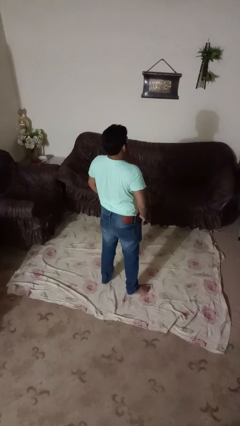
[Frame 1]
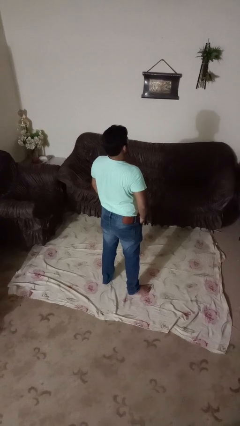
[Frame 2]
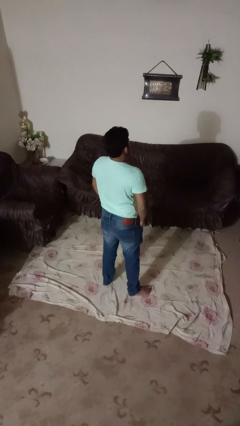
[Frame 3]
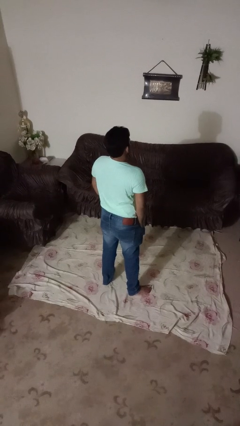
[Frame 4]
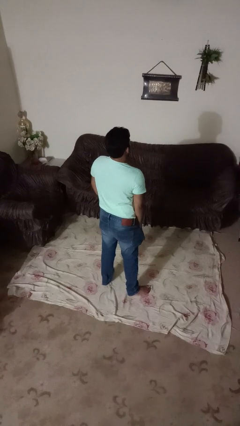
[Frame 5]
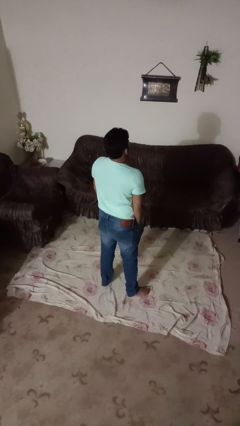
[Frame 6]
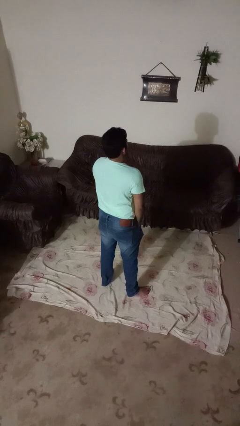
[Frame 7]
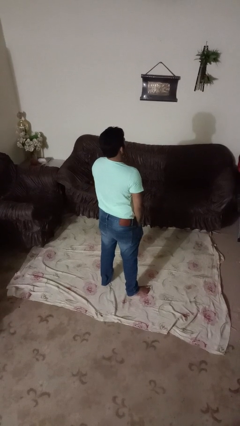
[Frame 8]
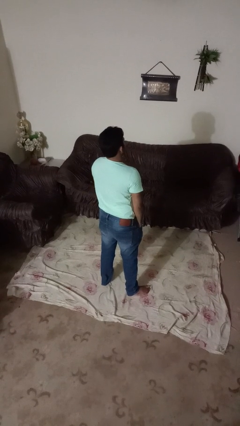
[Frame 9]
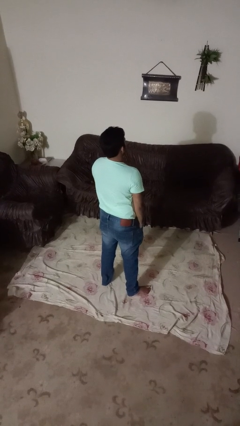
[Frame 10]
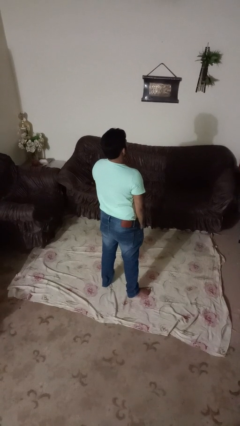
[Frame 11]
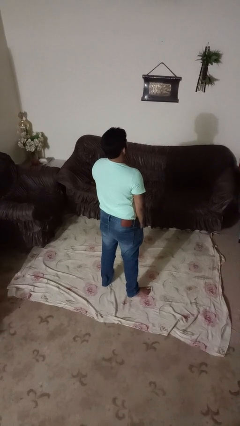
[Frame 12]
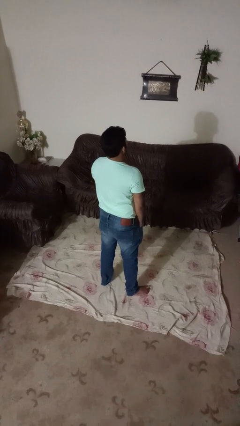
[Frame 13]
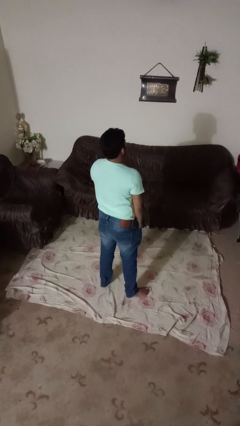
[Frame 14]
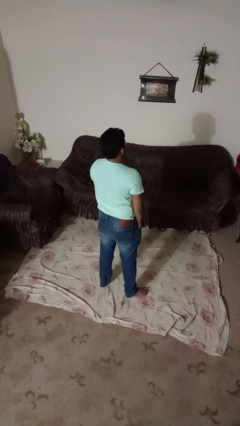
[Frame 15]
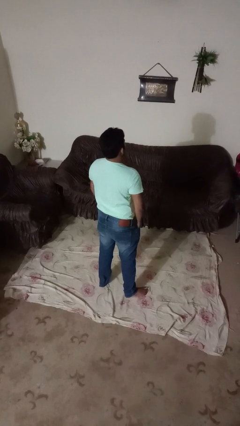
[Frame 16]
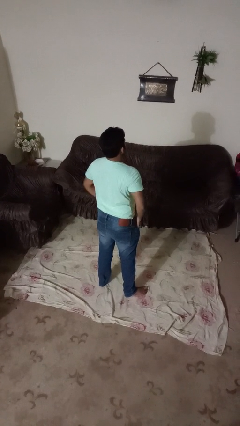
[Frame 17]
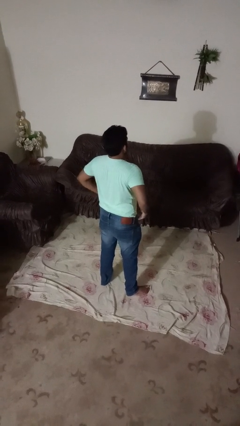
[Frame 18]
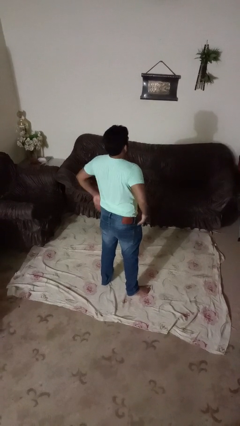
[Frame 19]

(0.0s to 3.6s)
person puts hands in back pockets

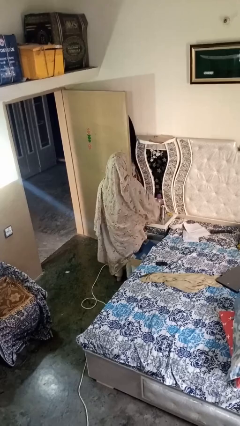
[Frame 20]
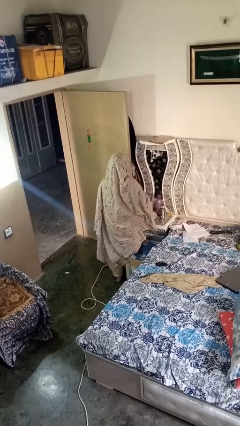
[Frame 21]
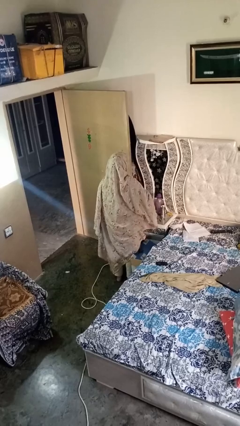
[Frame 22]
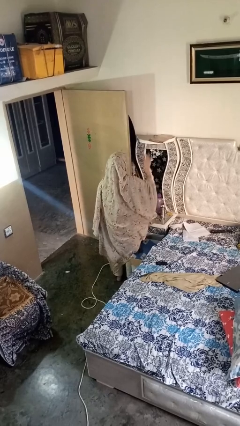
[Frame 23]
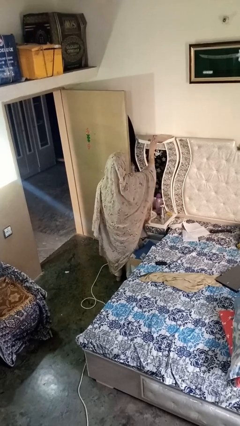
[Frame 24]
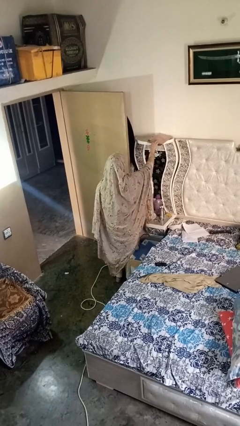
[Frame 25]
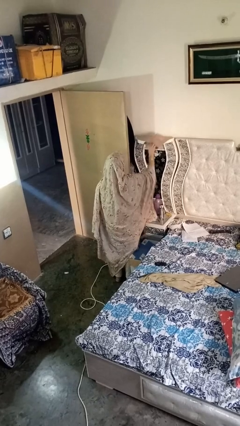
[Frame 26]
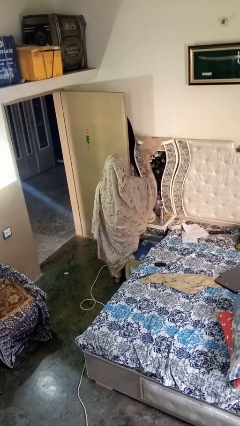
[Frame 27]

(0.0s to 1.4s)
person picks up object from shelf

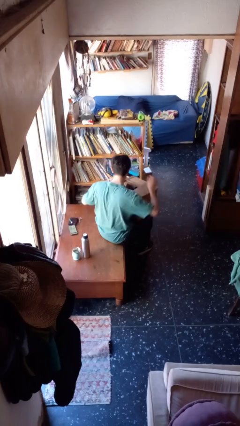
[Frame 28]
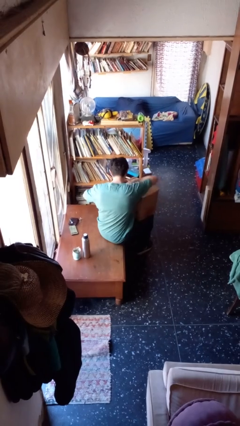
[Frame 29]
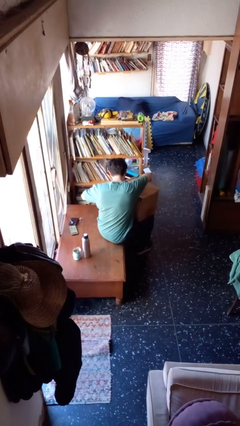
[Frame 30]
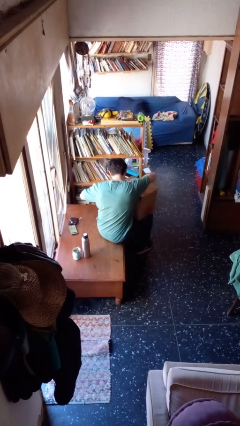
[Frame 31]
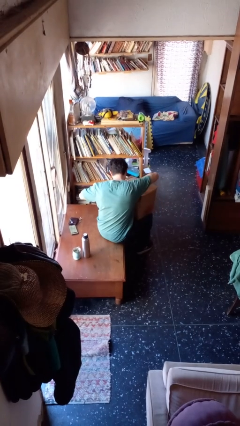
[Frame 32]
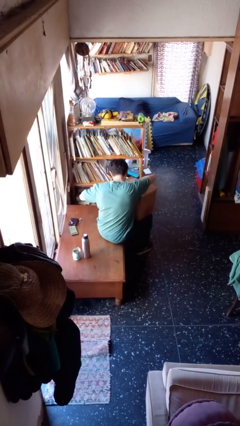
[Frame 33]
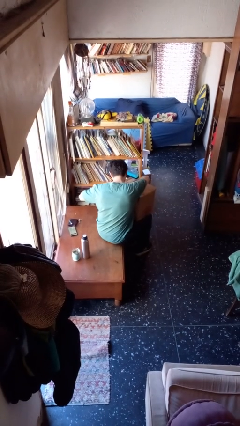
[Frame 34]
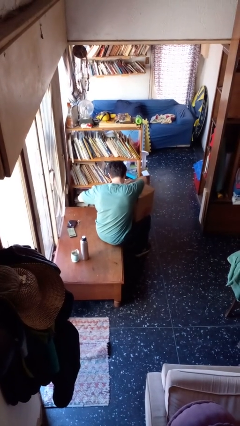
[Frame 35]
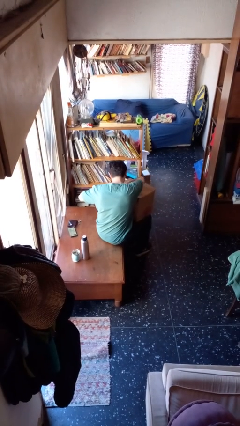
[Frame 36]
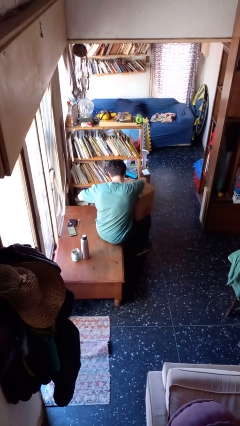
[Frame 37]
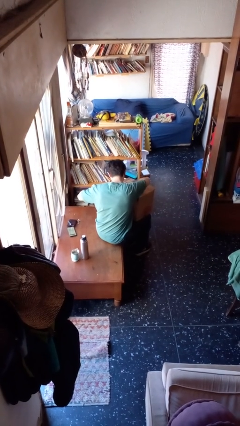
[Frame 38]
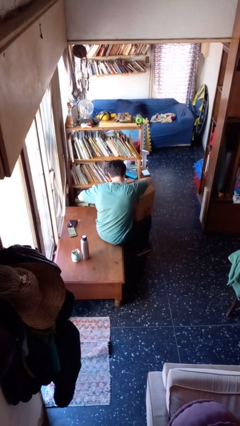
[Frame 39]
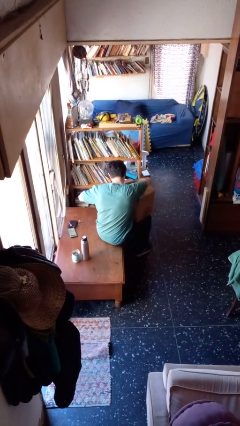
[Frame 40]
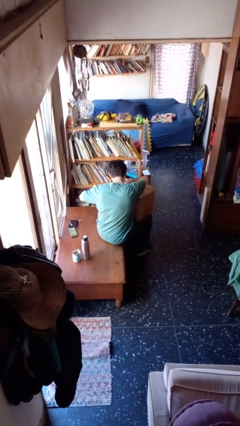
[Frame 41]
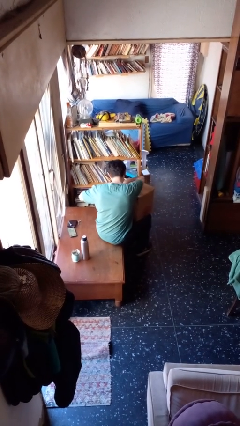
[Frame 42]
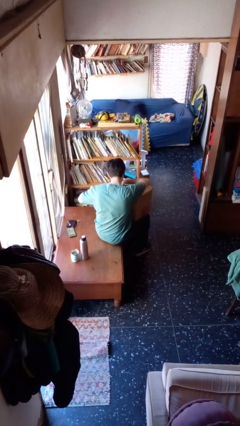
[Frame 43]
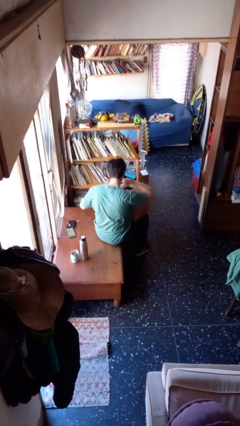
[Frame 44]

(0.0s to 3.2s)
person searches in box

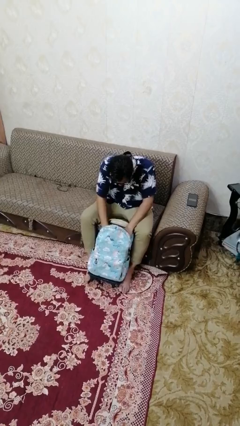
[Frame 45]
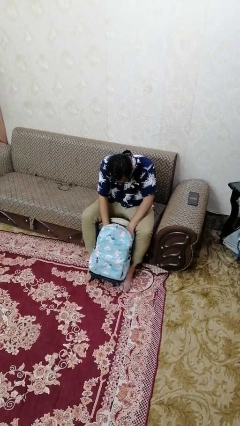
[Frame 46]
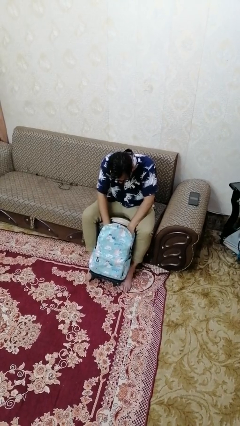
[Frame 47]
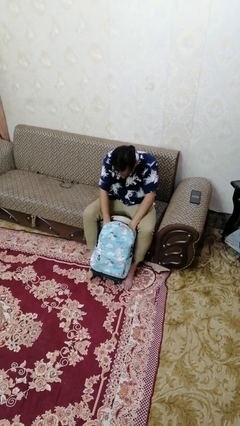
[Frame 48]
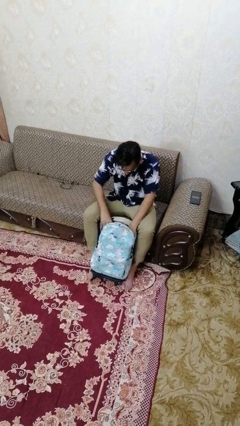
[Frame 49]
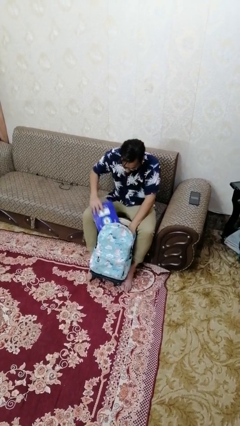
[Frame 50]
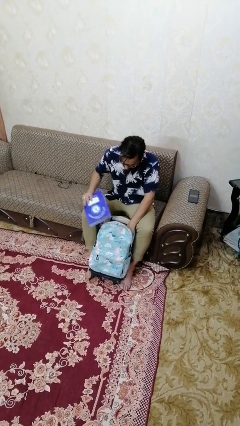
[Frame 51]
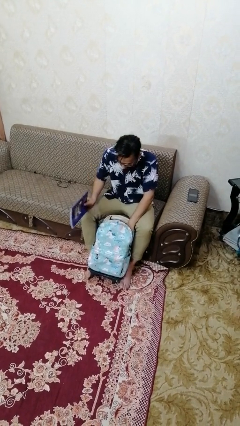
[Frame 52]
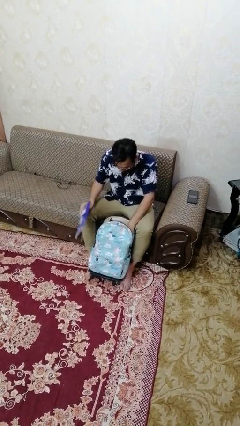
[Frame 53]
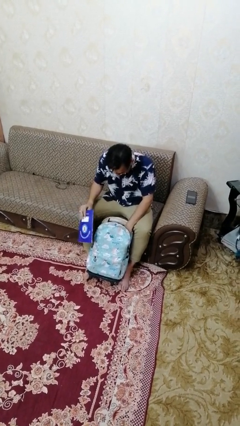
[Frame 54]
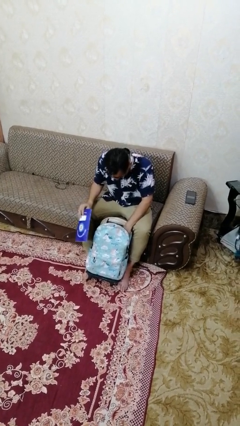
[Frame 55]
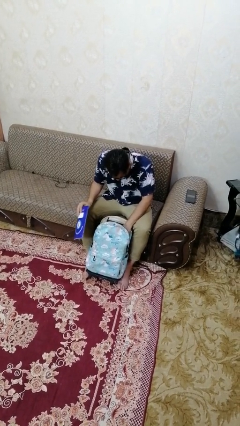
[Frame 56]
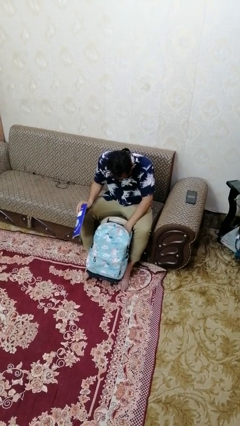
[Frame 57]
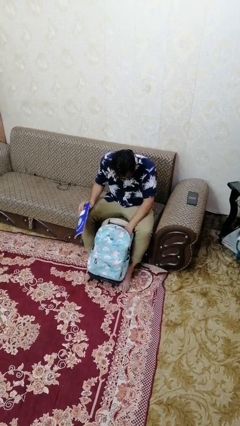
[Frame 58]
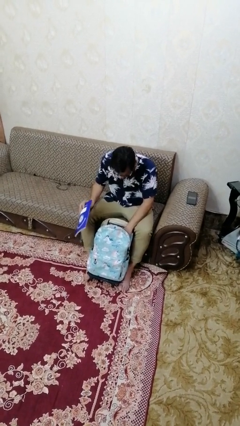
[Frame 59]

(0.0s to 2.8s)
person takes object from backpack

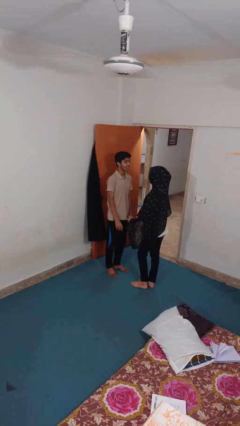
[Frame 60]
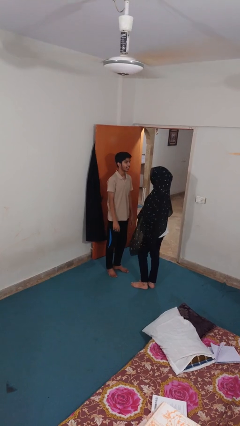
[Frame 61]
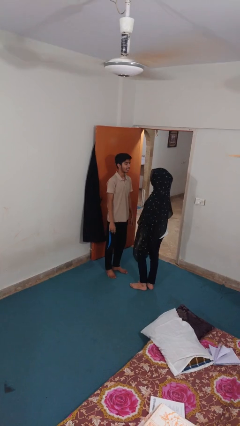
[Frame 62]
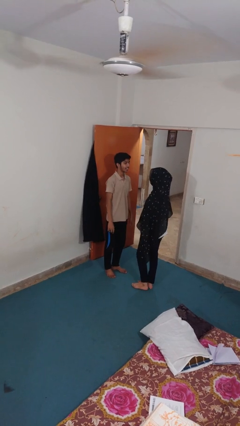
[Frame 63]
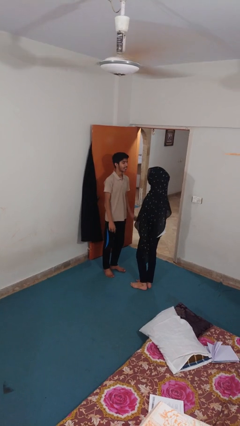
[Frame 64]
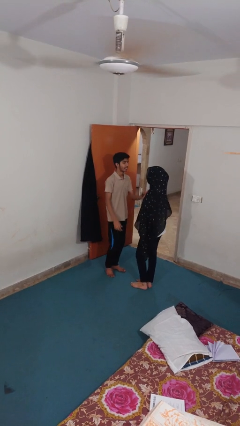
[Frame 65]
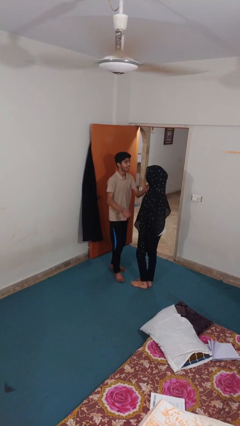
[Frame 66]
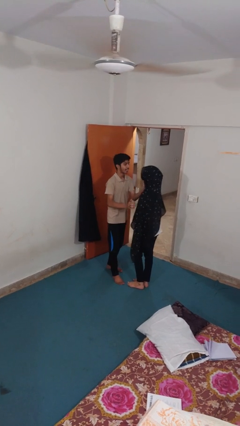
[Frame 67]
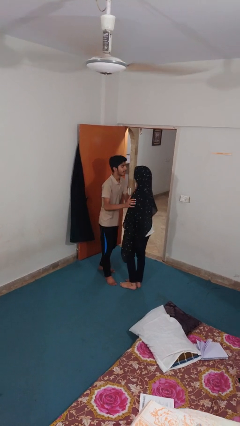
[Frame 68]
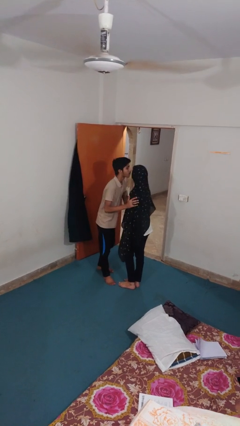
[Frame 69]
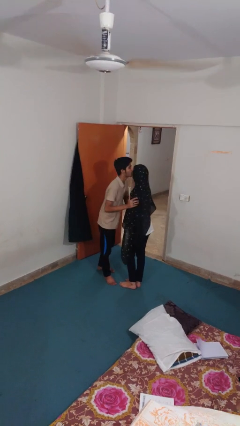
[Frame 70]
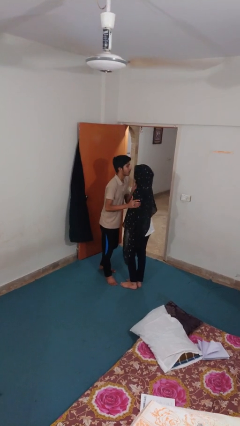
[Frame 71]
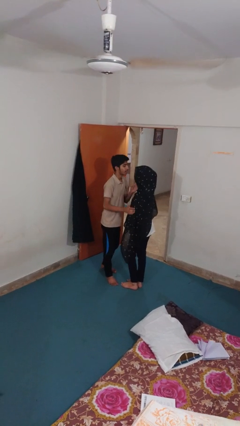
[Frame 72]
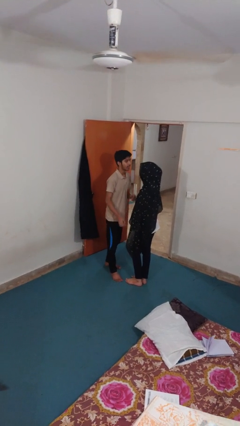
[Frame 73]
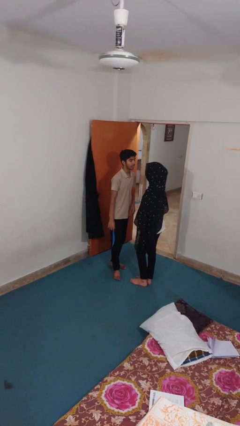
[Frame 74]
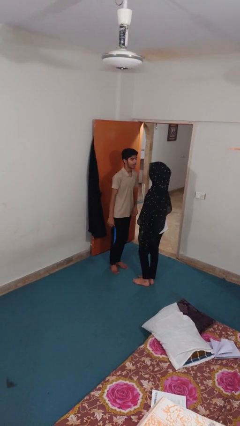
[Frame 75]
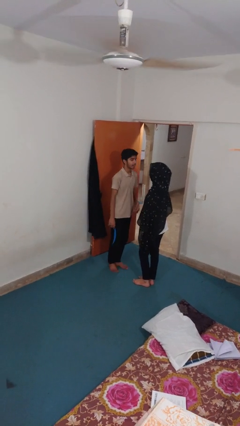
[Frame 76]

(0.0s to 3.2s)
person kisses cheek of person

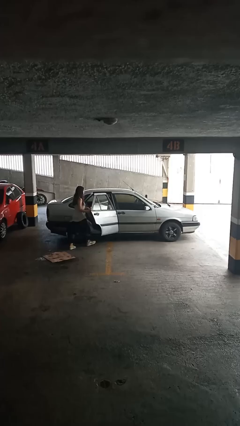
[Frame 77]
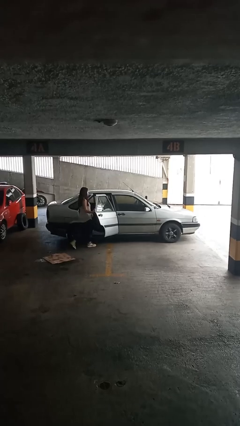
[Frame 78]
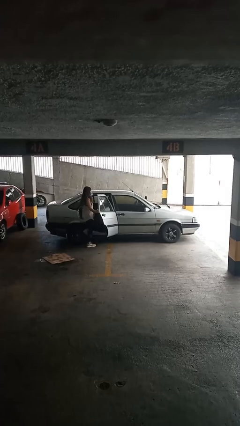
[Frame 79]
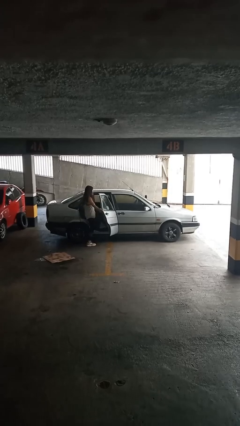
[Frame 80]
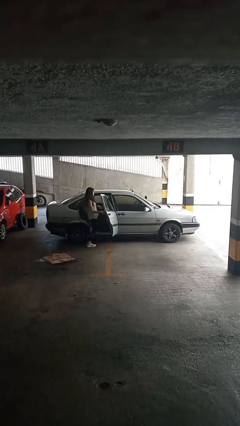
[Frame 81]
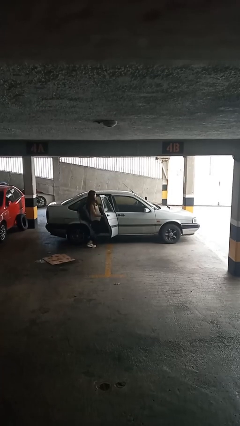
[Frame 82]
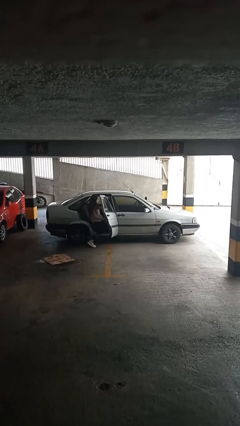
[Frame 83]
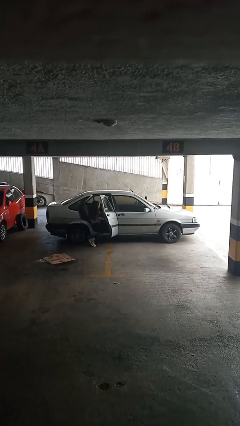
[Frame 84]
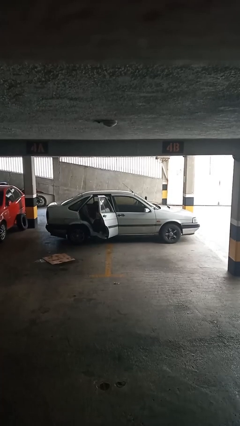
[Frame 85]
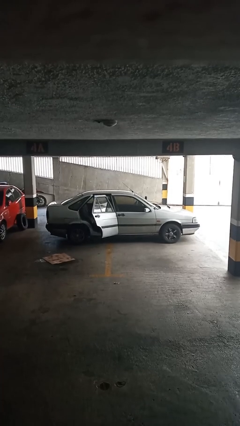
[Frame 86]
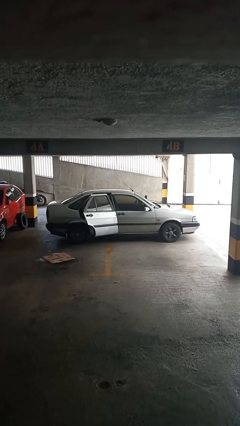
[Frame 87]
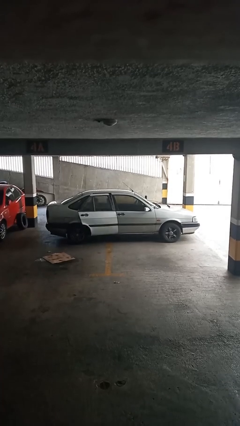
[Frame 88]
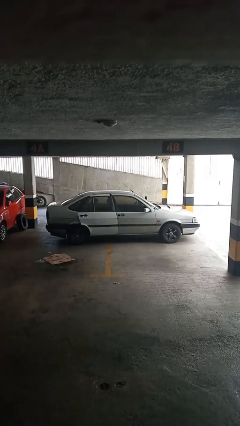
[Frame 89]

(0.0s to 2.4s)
car picks up person

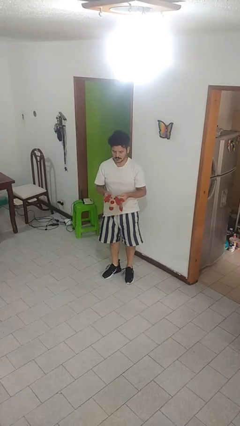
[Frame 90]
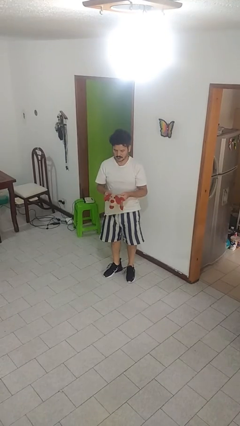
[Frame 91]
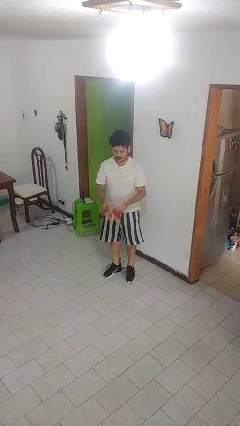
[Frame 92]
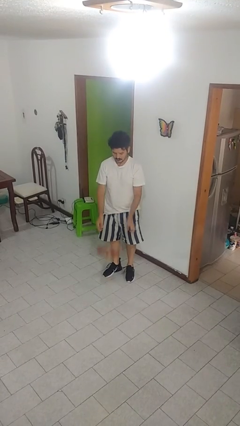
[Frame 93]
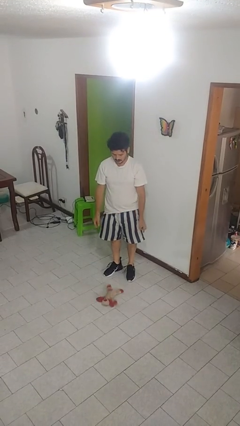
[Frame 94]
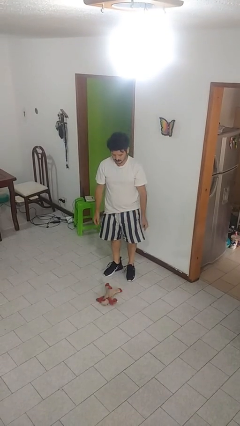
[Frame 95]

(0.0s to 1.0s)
person throws object to ground
